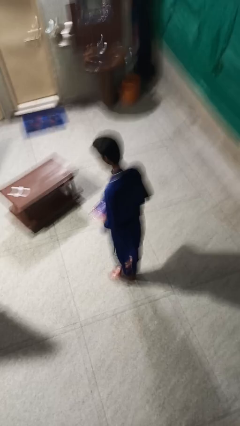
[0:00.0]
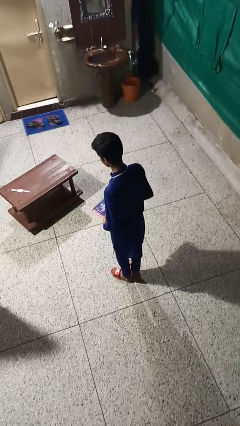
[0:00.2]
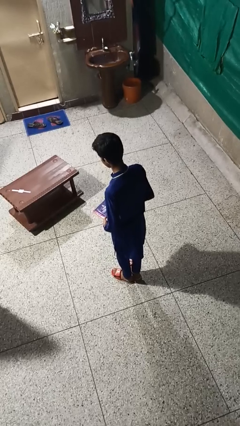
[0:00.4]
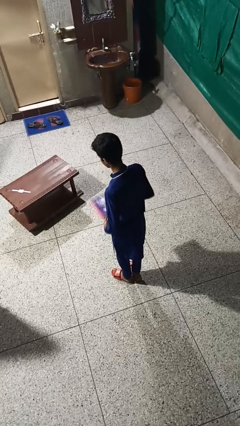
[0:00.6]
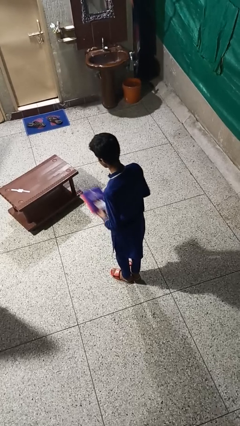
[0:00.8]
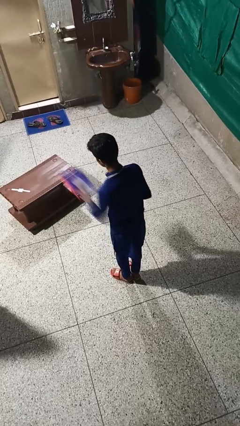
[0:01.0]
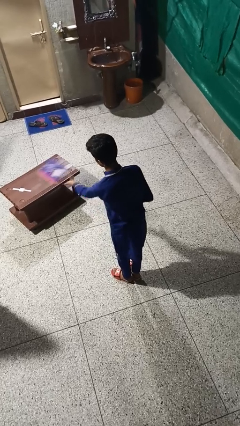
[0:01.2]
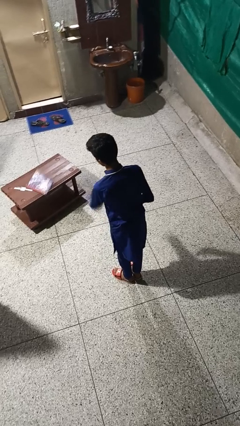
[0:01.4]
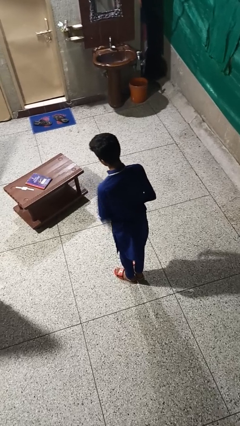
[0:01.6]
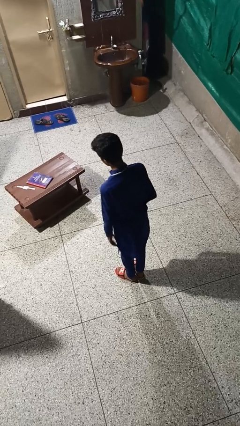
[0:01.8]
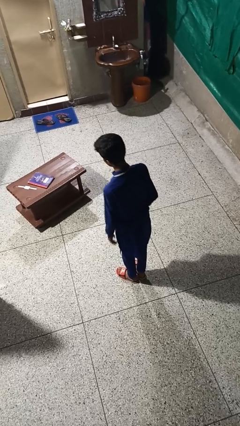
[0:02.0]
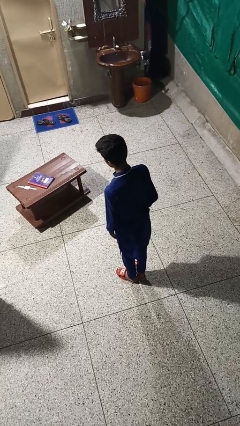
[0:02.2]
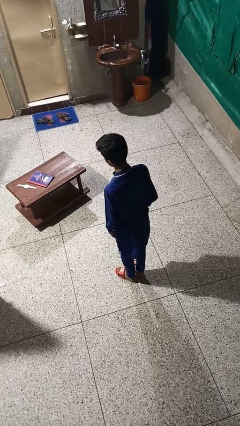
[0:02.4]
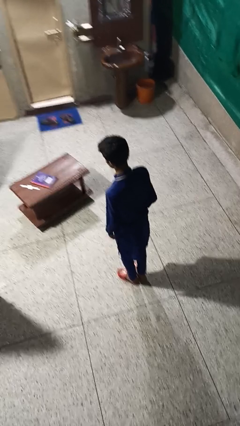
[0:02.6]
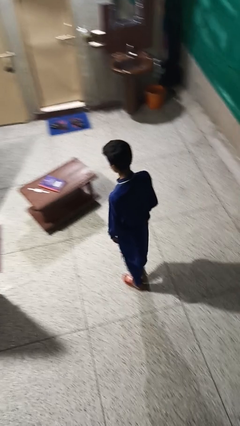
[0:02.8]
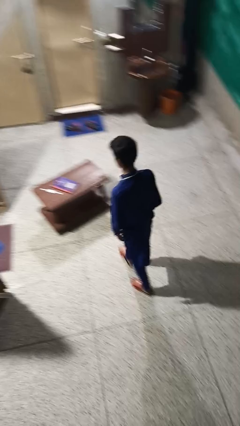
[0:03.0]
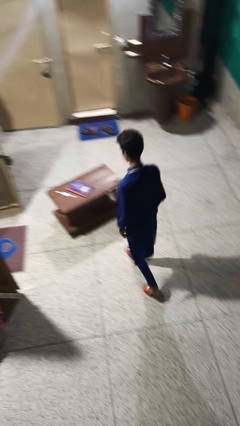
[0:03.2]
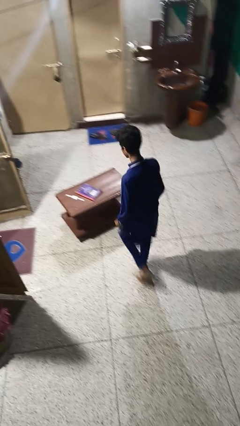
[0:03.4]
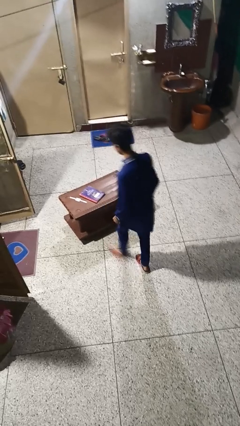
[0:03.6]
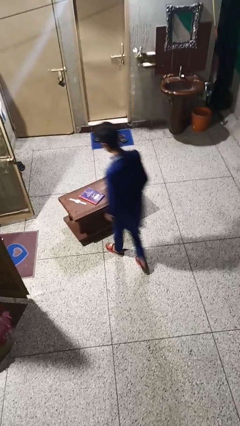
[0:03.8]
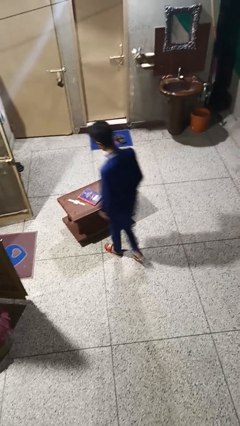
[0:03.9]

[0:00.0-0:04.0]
person throws object on table

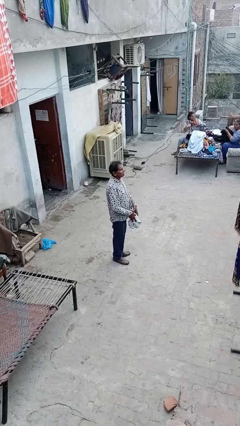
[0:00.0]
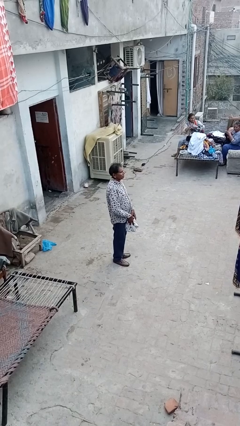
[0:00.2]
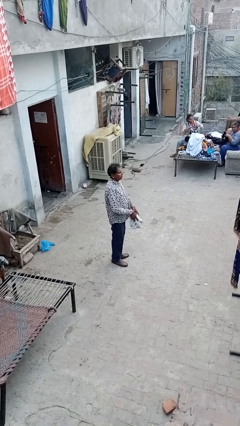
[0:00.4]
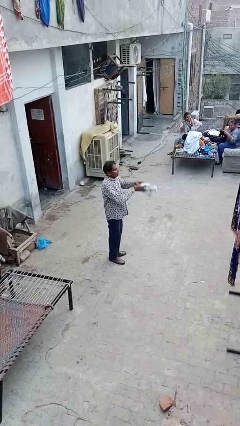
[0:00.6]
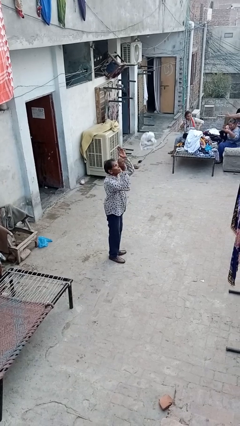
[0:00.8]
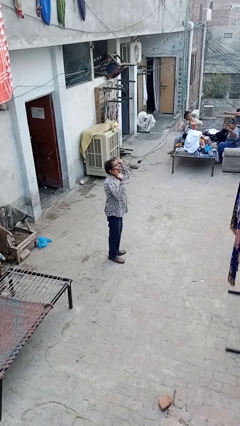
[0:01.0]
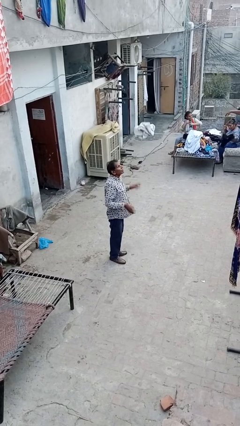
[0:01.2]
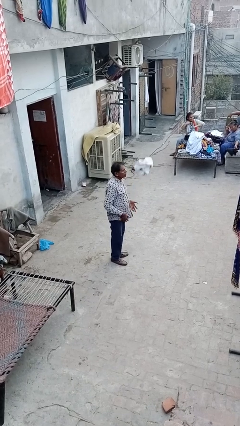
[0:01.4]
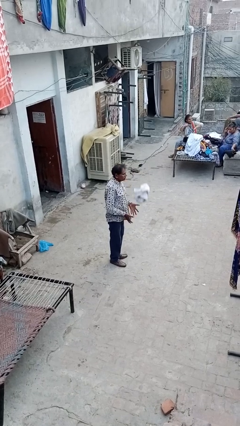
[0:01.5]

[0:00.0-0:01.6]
person drops object

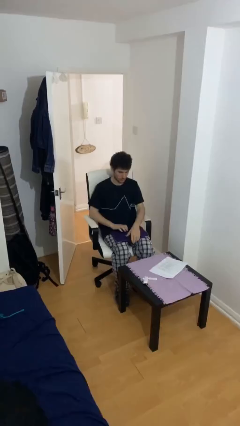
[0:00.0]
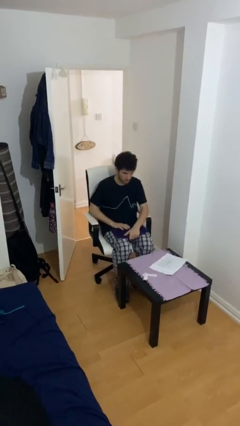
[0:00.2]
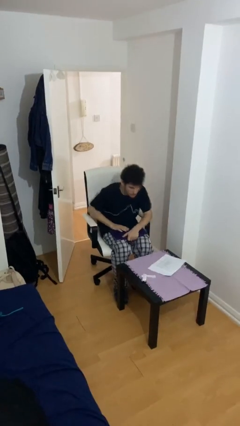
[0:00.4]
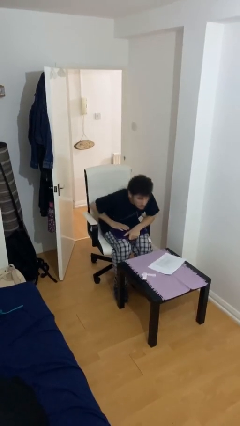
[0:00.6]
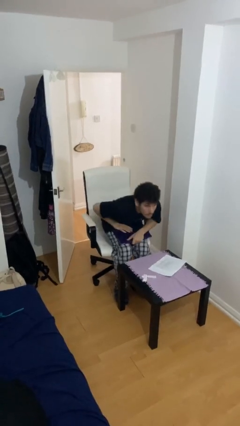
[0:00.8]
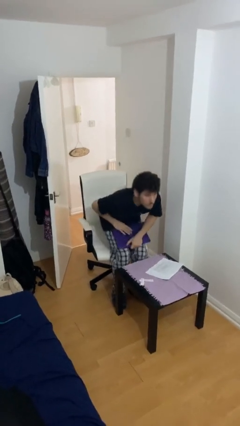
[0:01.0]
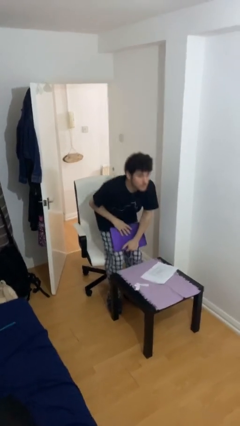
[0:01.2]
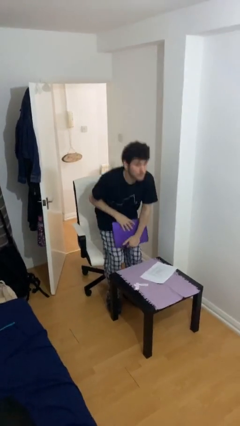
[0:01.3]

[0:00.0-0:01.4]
person stands up

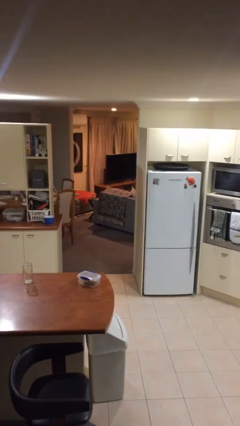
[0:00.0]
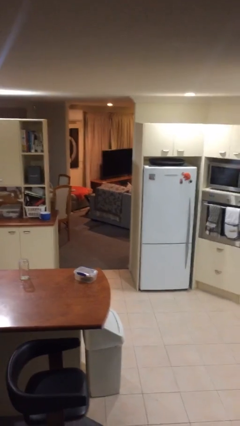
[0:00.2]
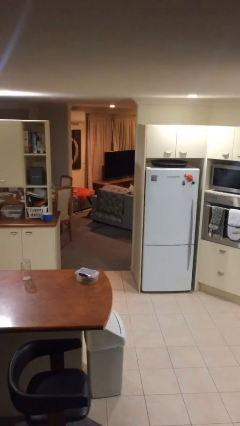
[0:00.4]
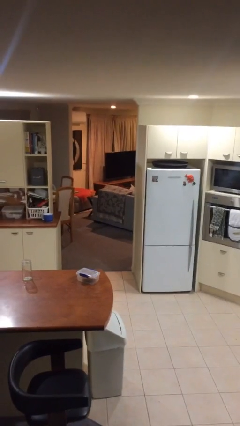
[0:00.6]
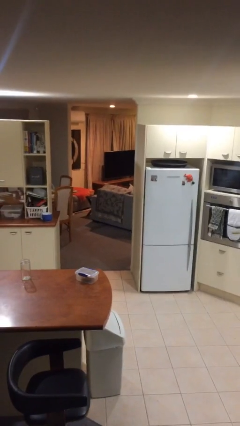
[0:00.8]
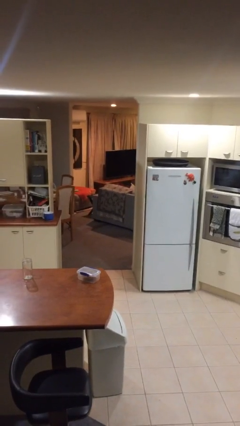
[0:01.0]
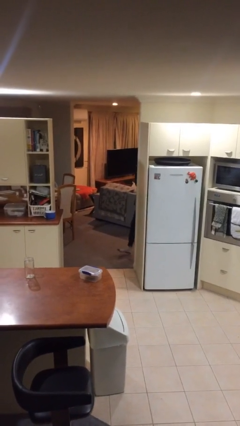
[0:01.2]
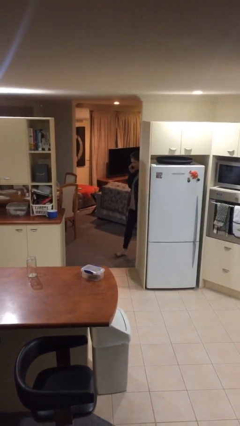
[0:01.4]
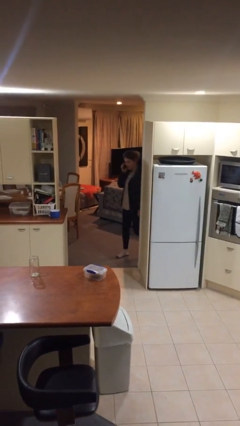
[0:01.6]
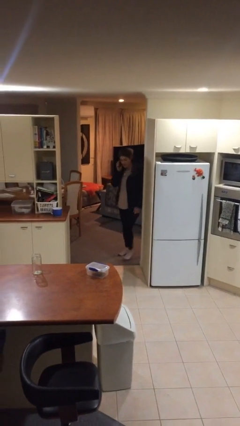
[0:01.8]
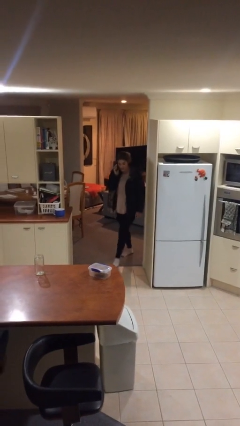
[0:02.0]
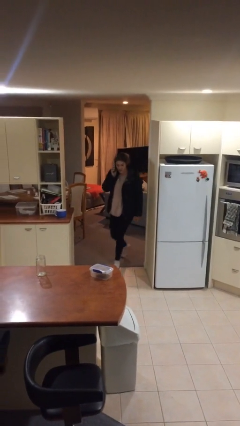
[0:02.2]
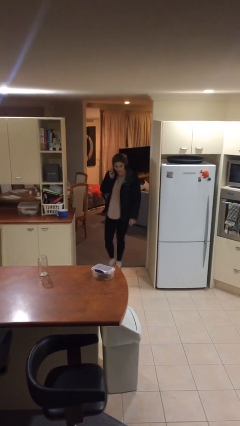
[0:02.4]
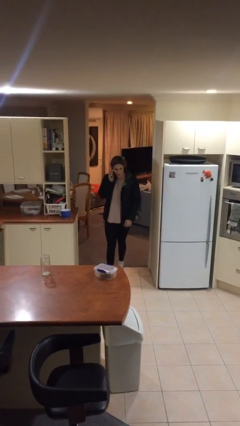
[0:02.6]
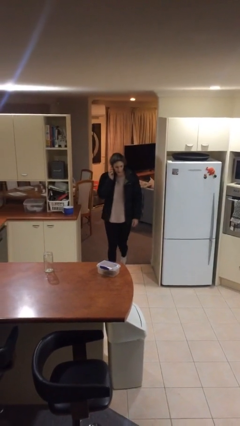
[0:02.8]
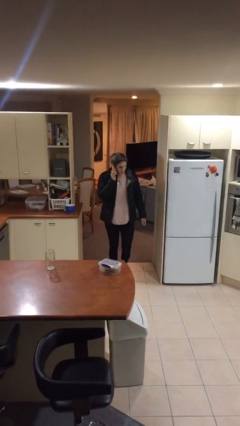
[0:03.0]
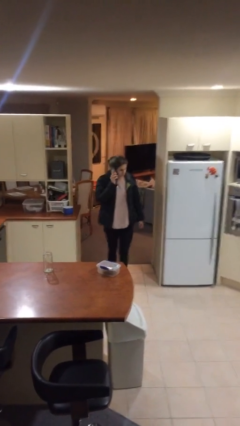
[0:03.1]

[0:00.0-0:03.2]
person enters scene through structure

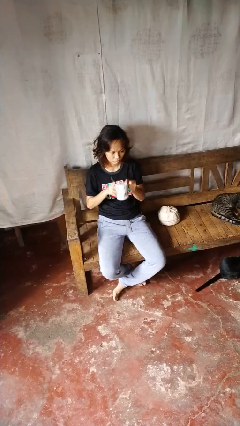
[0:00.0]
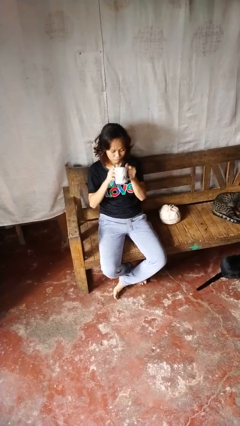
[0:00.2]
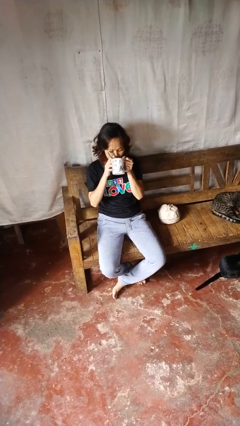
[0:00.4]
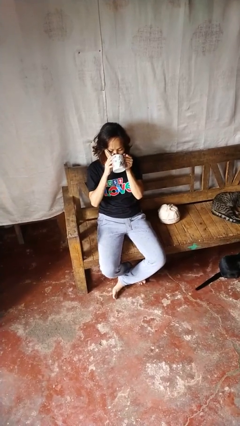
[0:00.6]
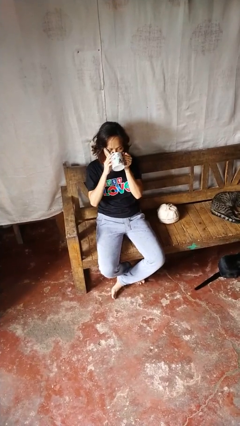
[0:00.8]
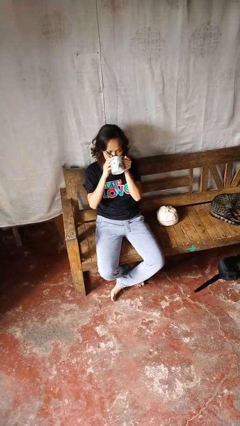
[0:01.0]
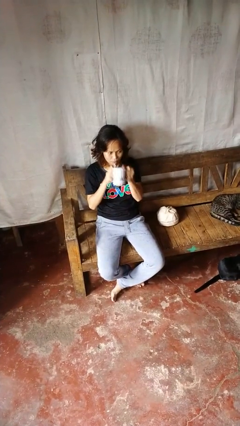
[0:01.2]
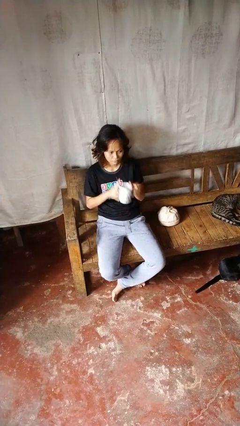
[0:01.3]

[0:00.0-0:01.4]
person drinks from mug

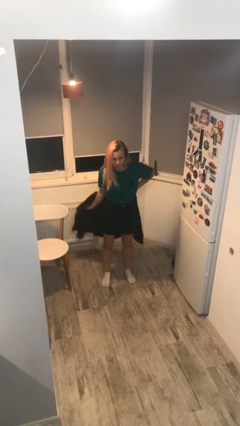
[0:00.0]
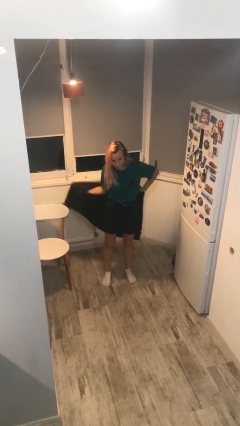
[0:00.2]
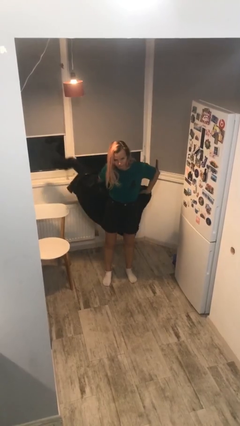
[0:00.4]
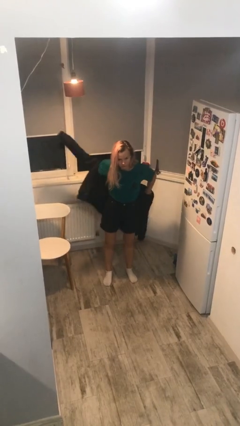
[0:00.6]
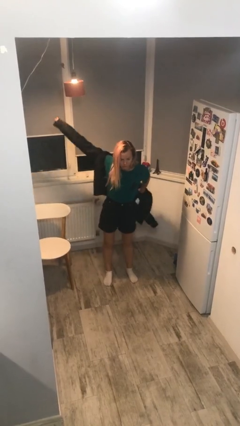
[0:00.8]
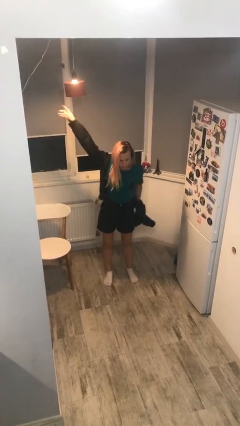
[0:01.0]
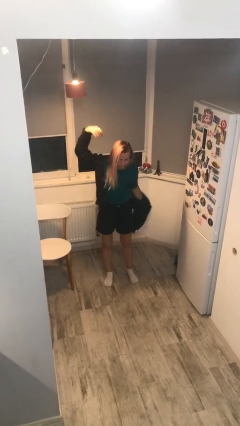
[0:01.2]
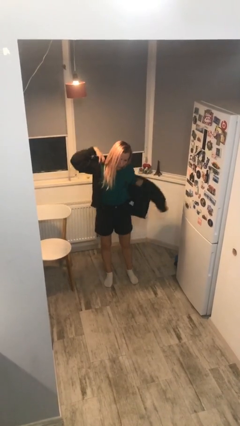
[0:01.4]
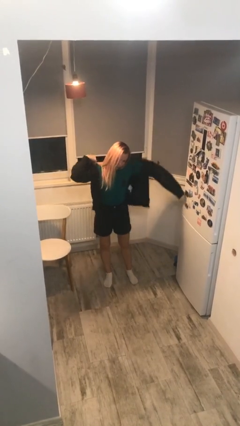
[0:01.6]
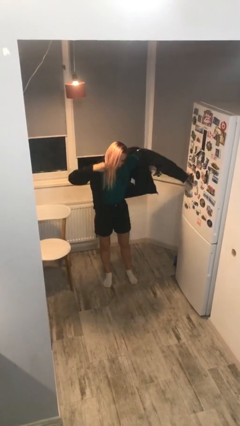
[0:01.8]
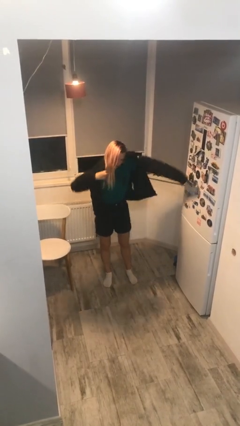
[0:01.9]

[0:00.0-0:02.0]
person puts on jacket

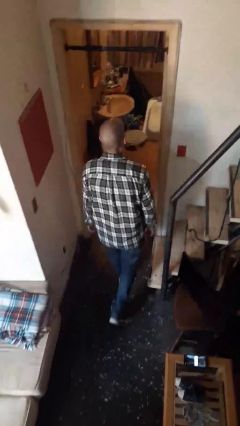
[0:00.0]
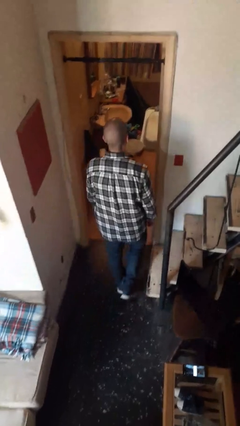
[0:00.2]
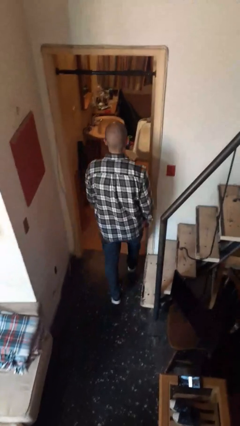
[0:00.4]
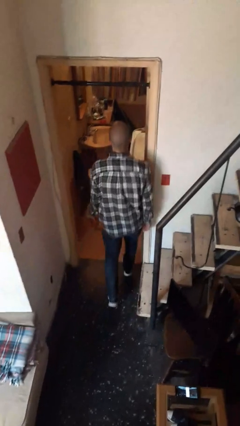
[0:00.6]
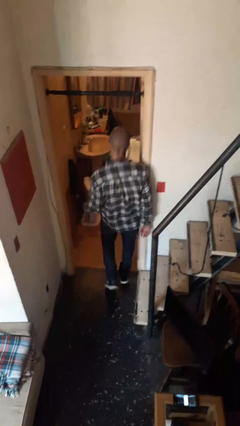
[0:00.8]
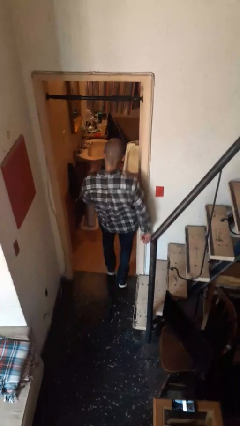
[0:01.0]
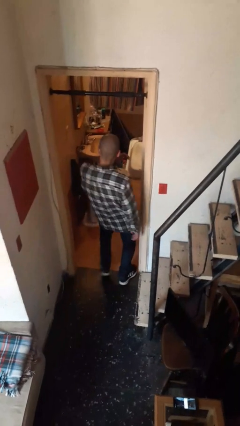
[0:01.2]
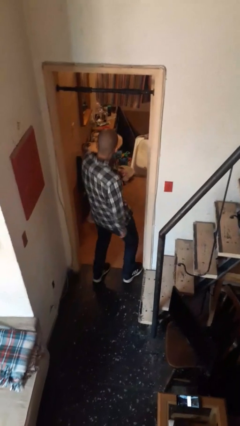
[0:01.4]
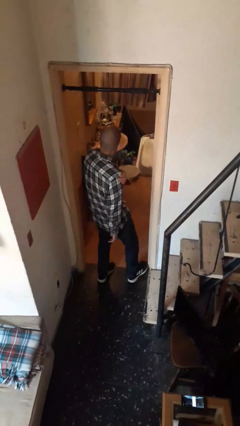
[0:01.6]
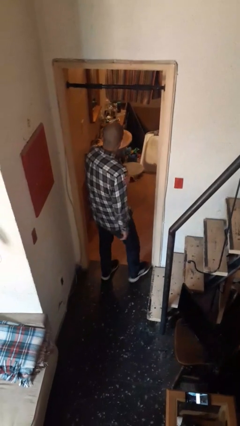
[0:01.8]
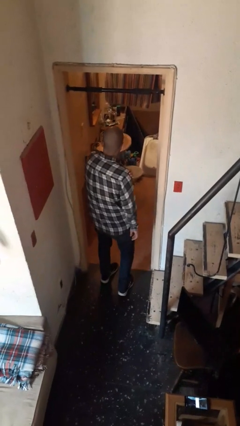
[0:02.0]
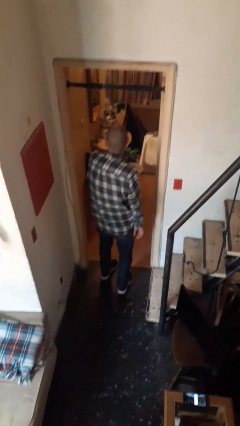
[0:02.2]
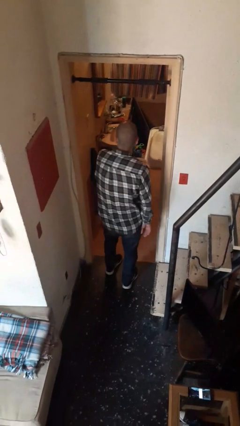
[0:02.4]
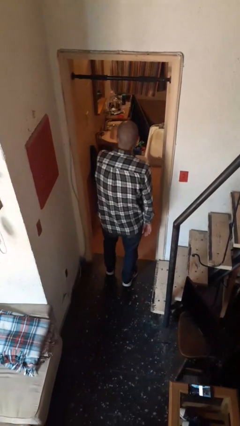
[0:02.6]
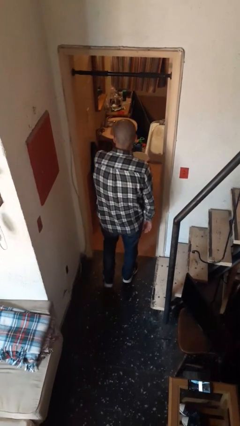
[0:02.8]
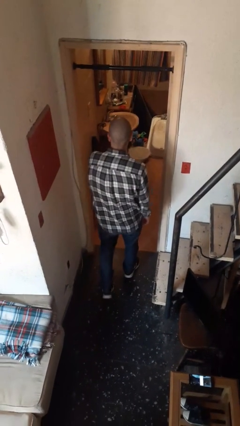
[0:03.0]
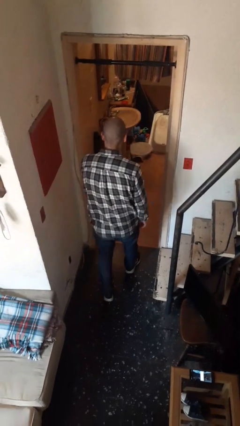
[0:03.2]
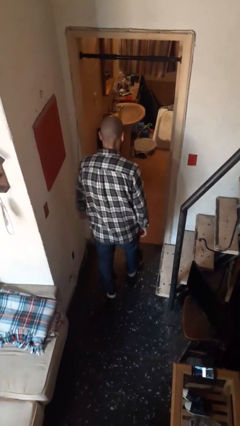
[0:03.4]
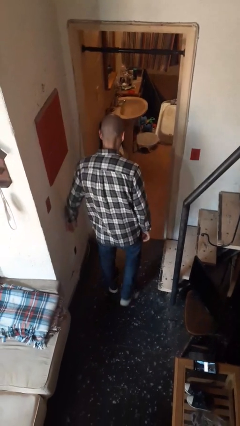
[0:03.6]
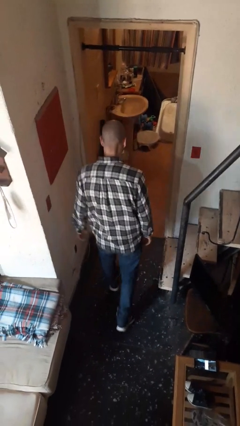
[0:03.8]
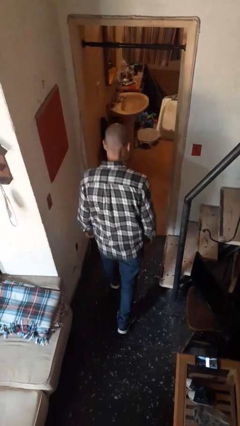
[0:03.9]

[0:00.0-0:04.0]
person bumps into wall
